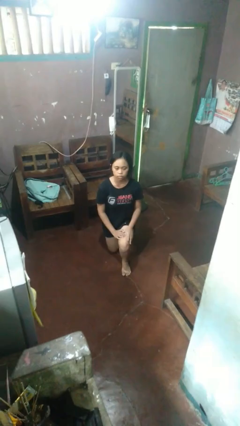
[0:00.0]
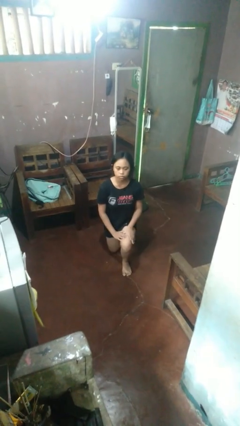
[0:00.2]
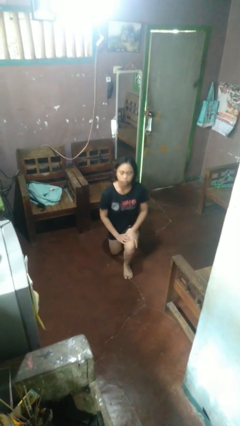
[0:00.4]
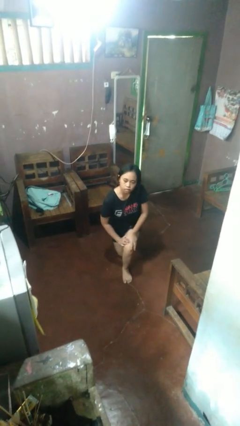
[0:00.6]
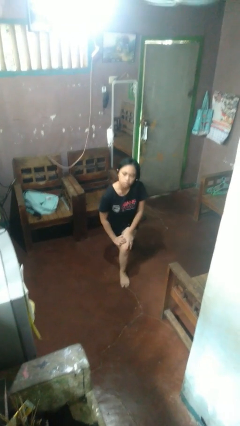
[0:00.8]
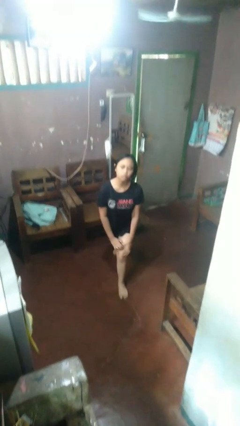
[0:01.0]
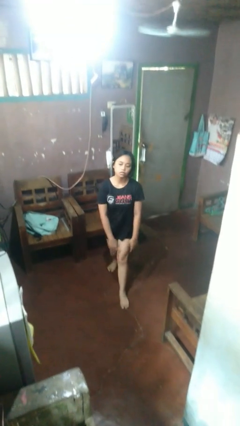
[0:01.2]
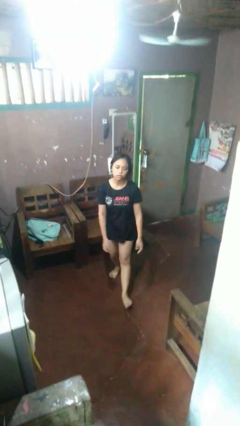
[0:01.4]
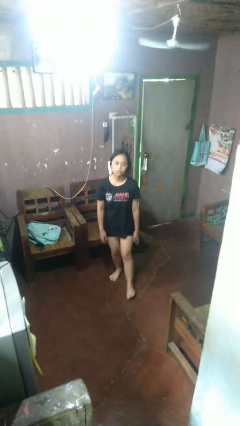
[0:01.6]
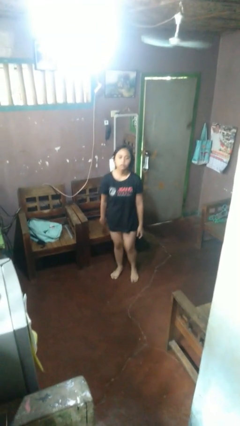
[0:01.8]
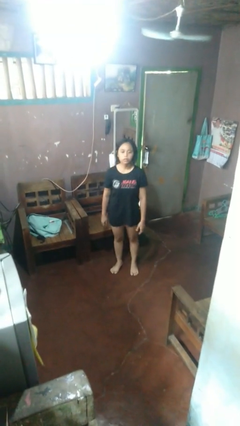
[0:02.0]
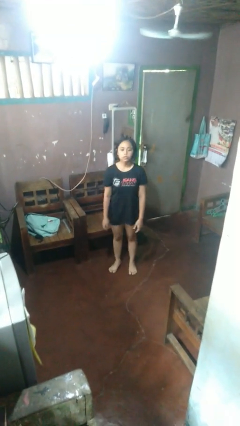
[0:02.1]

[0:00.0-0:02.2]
person stands up from floor

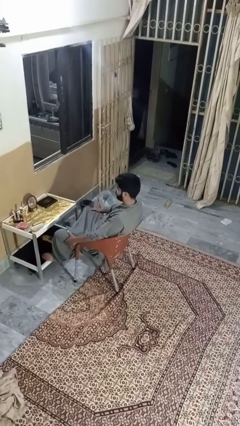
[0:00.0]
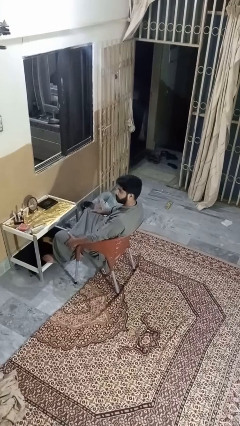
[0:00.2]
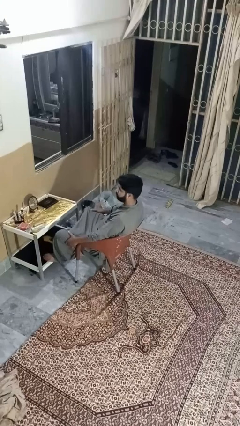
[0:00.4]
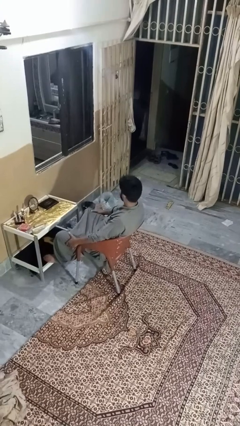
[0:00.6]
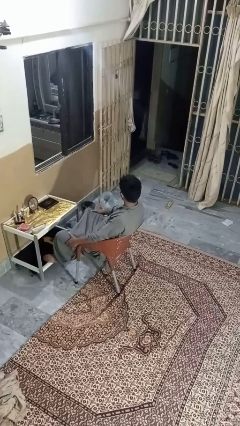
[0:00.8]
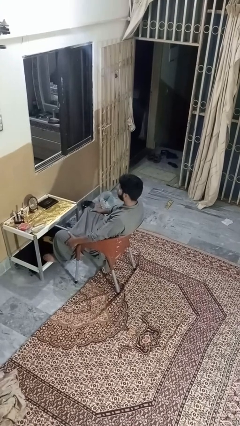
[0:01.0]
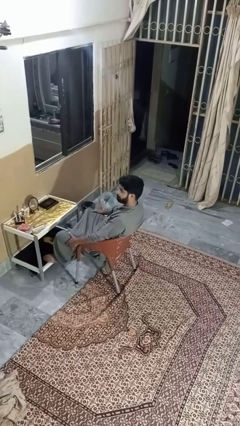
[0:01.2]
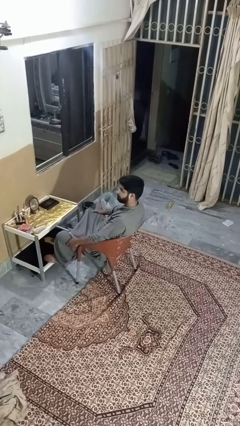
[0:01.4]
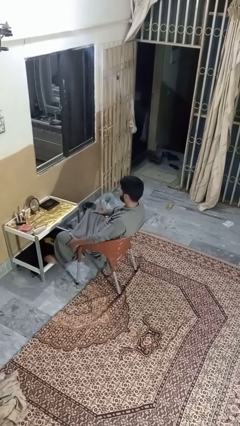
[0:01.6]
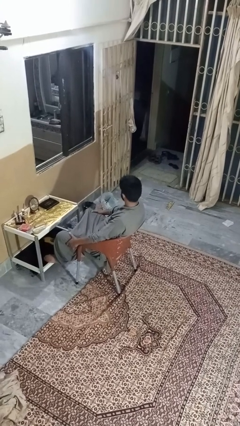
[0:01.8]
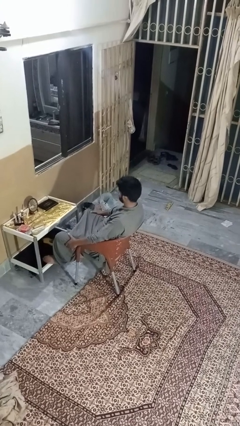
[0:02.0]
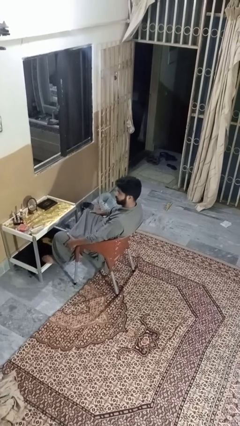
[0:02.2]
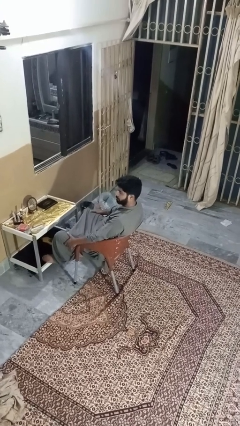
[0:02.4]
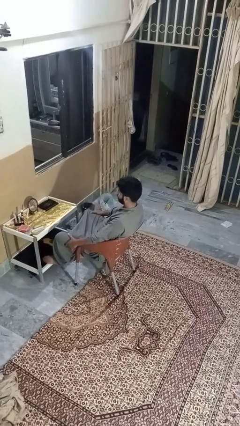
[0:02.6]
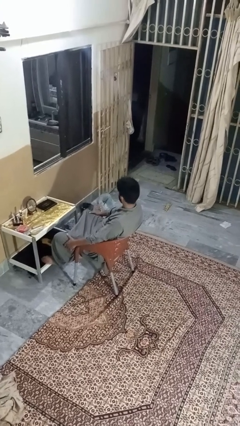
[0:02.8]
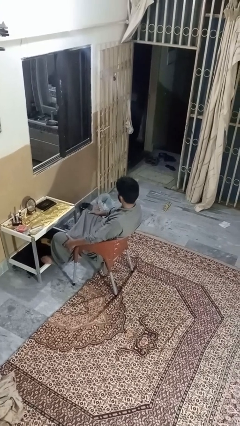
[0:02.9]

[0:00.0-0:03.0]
person shakes head

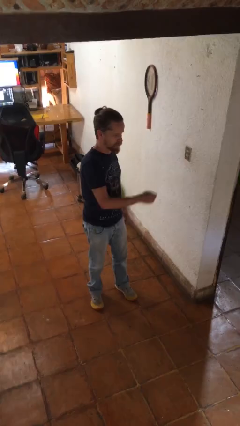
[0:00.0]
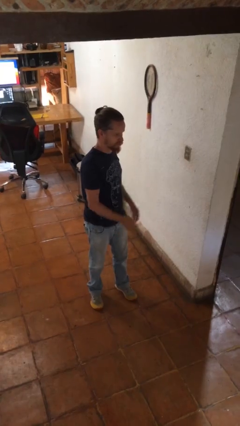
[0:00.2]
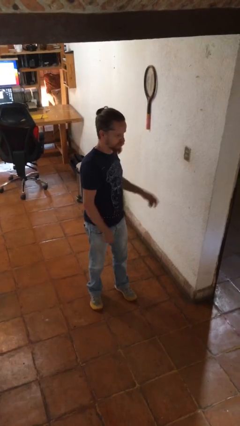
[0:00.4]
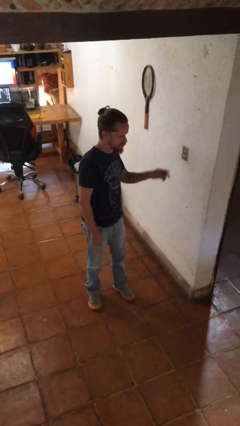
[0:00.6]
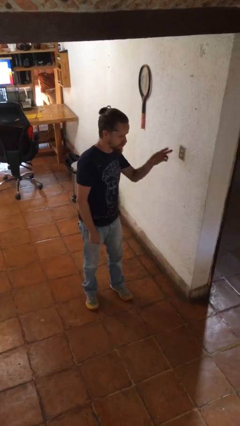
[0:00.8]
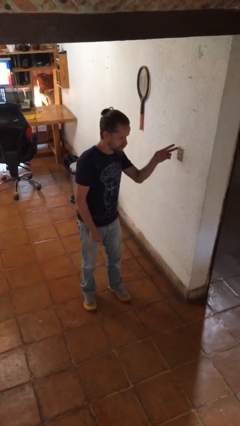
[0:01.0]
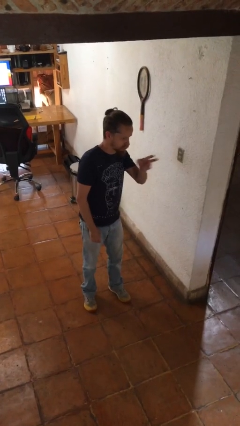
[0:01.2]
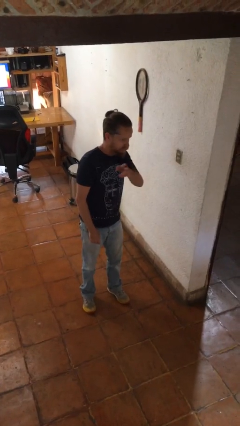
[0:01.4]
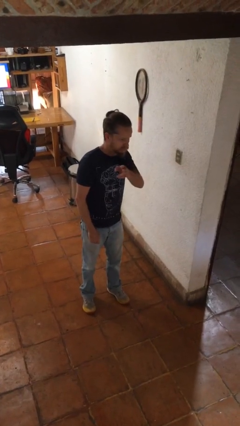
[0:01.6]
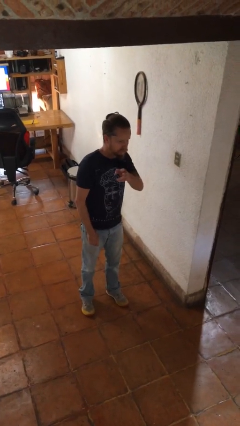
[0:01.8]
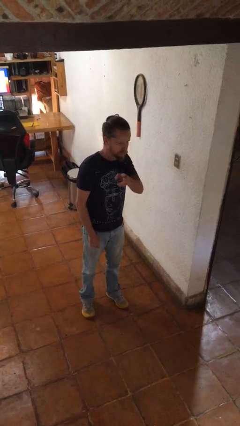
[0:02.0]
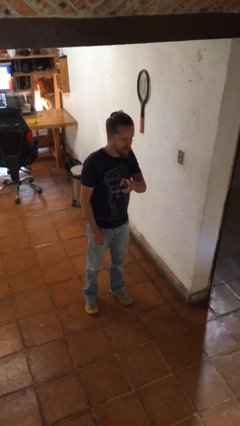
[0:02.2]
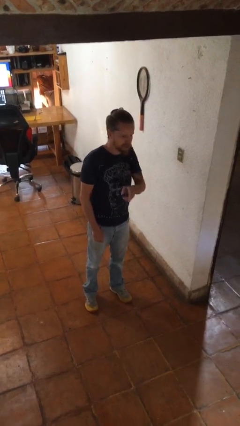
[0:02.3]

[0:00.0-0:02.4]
person gestures swipe right

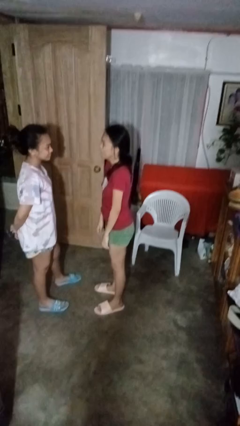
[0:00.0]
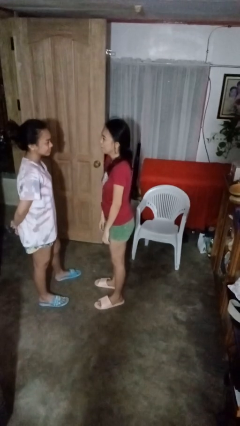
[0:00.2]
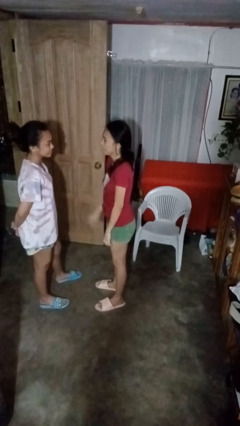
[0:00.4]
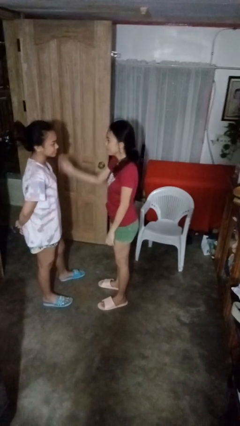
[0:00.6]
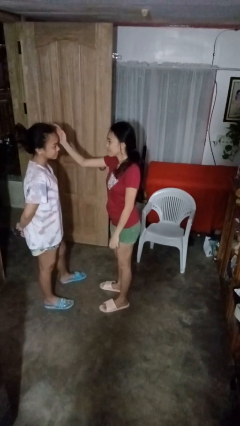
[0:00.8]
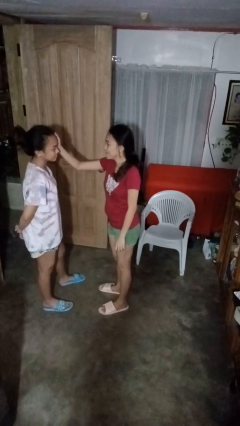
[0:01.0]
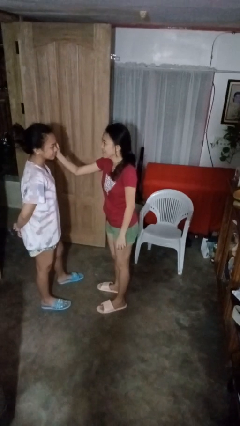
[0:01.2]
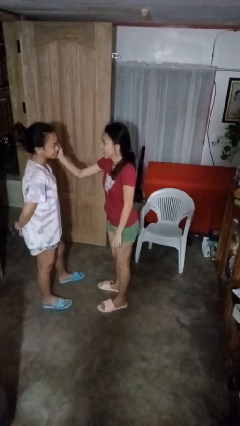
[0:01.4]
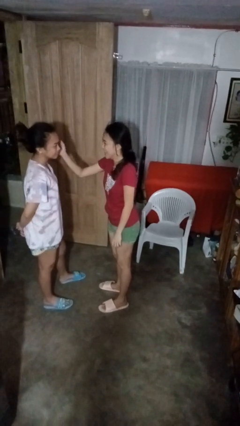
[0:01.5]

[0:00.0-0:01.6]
person touches face of person

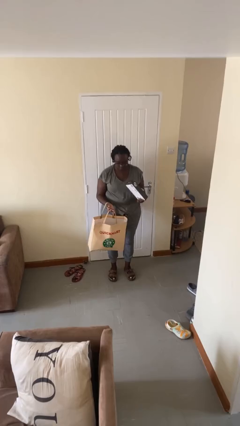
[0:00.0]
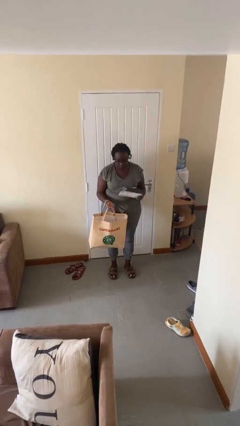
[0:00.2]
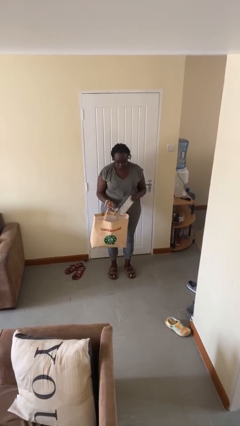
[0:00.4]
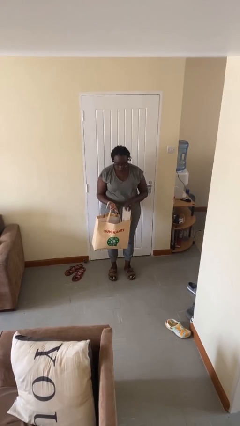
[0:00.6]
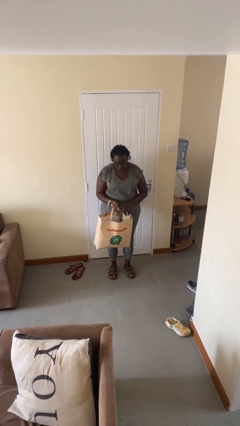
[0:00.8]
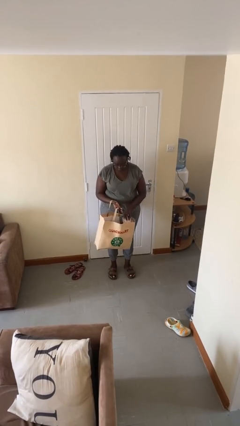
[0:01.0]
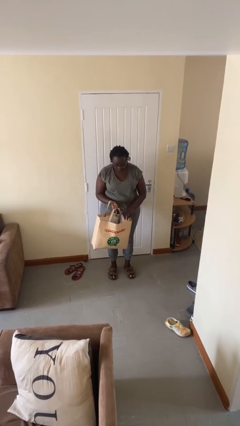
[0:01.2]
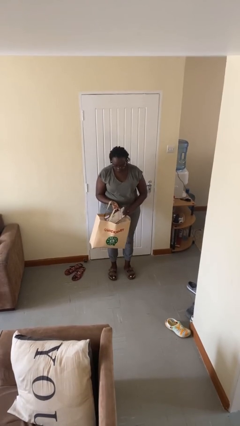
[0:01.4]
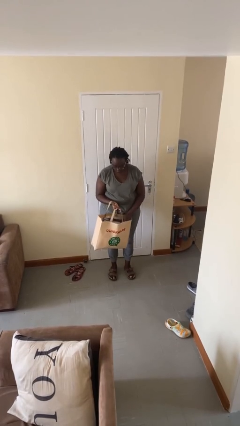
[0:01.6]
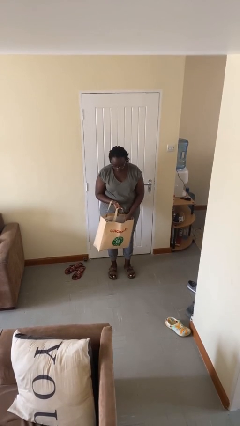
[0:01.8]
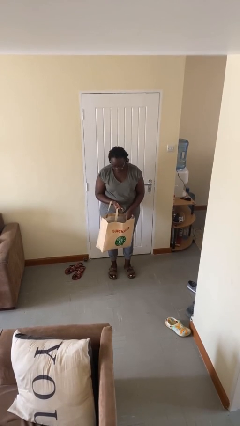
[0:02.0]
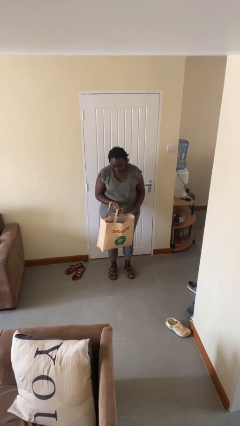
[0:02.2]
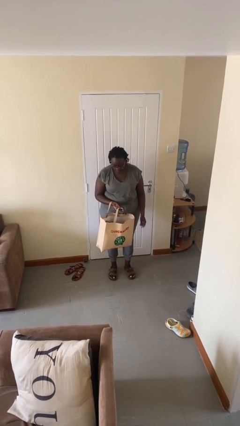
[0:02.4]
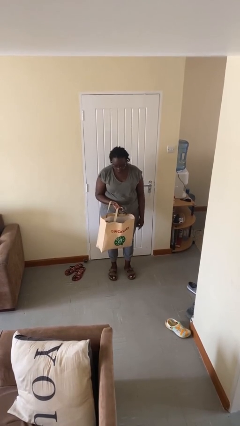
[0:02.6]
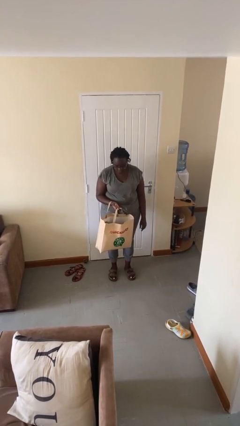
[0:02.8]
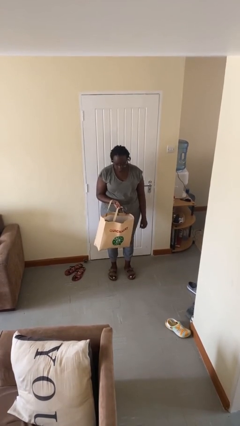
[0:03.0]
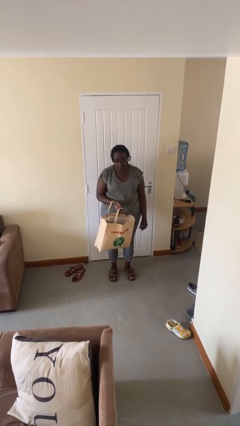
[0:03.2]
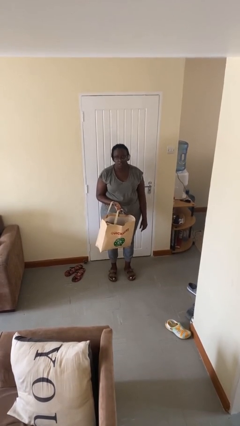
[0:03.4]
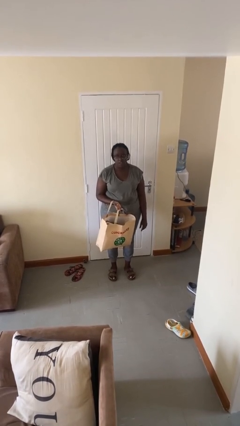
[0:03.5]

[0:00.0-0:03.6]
person puts object into bag

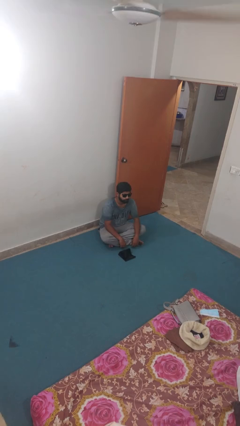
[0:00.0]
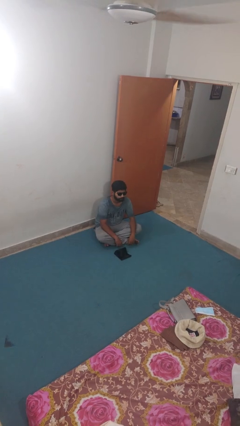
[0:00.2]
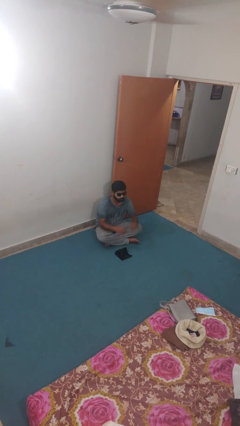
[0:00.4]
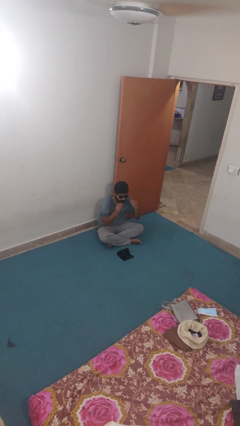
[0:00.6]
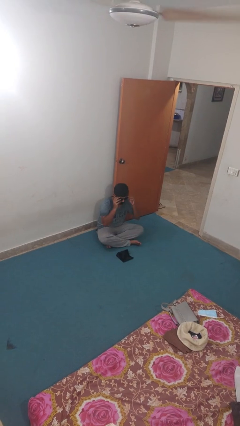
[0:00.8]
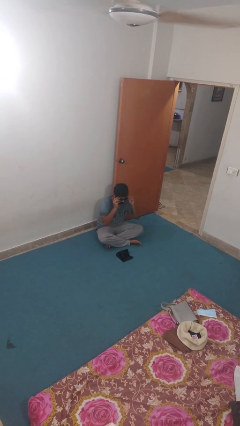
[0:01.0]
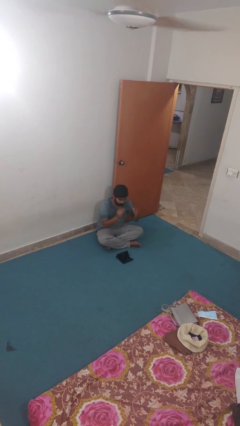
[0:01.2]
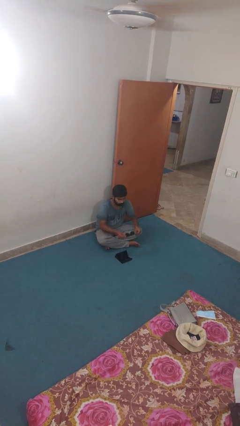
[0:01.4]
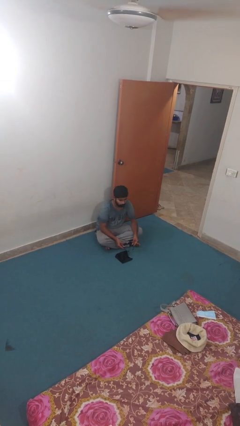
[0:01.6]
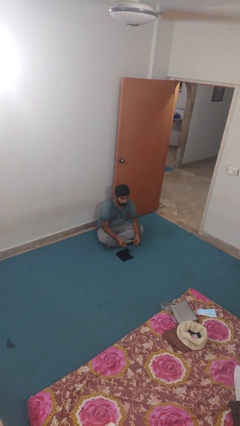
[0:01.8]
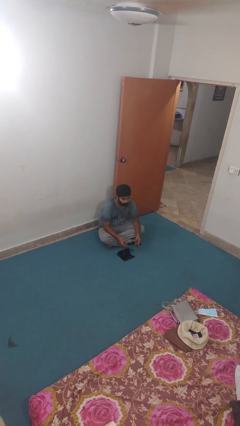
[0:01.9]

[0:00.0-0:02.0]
person takes off sunglasses

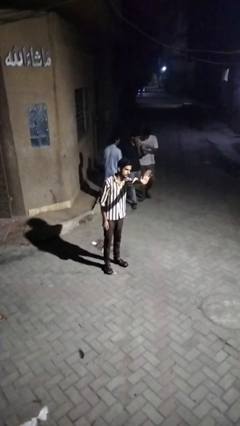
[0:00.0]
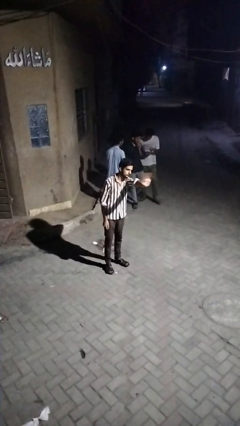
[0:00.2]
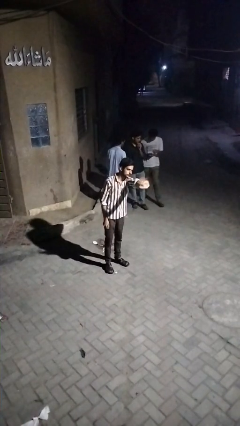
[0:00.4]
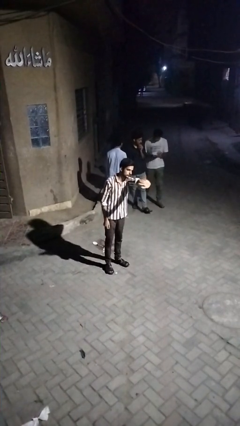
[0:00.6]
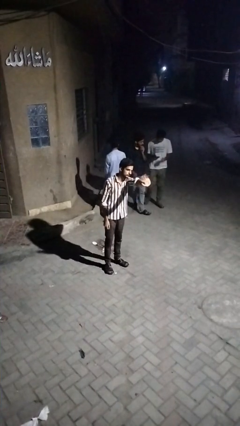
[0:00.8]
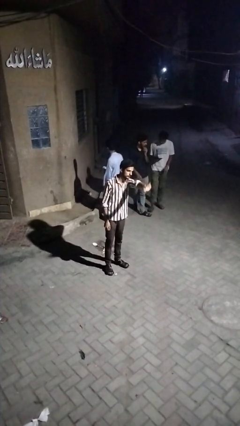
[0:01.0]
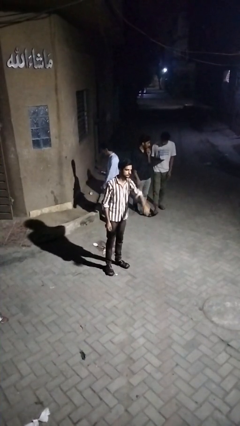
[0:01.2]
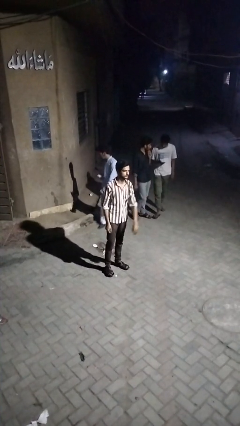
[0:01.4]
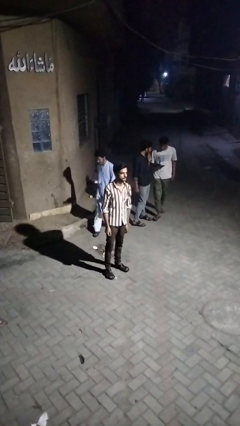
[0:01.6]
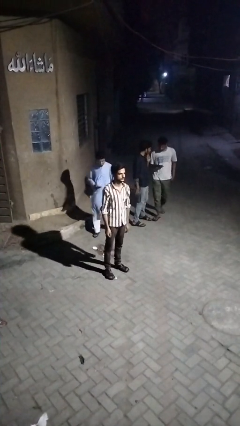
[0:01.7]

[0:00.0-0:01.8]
person waves at person

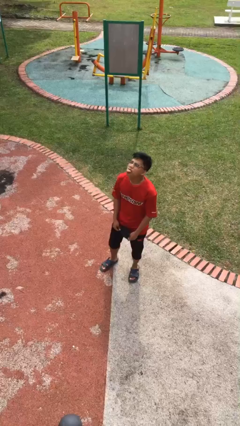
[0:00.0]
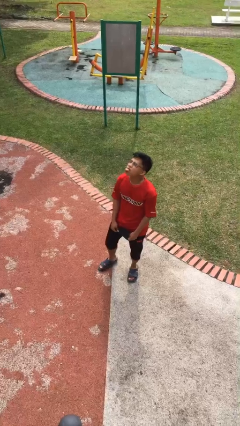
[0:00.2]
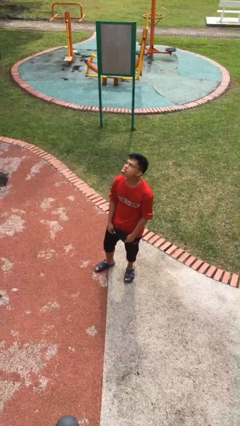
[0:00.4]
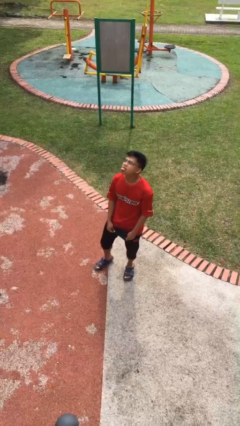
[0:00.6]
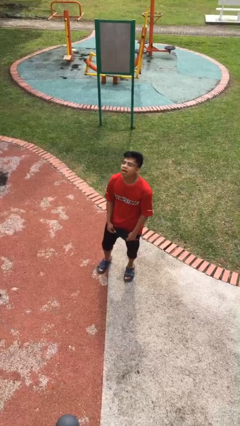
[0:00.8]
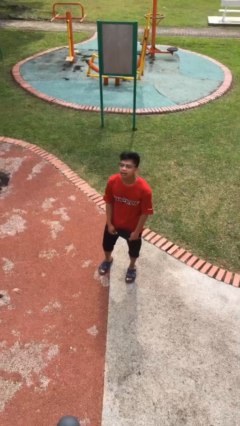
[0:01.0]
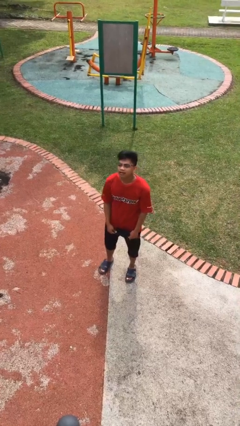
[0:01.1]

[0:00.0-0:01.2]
person sticks out tongue
